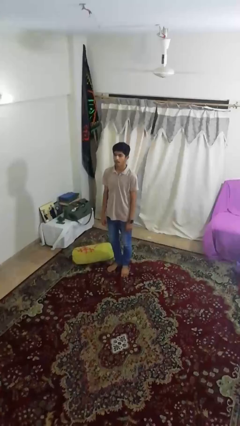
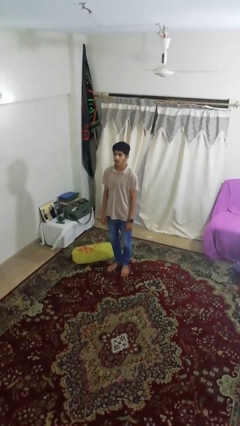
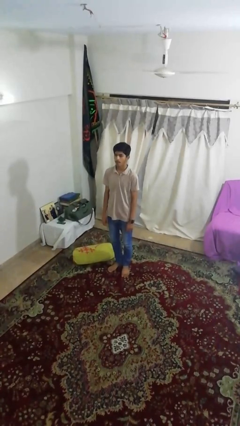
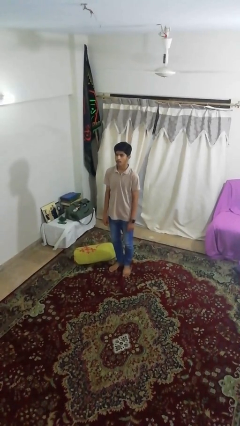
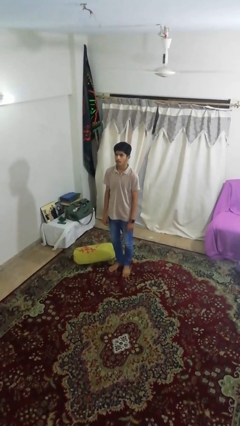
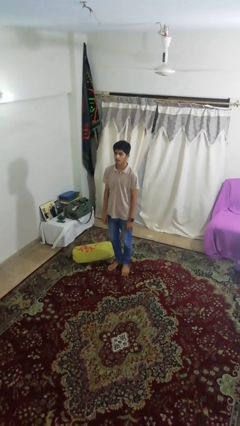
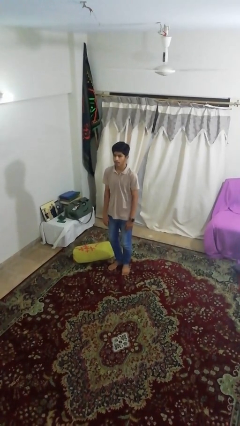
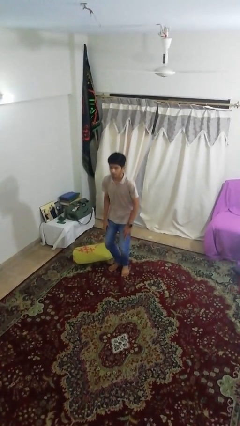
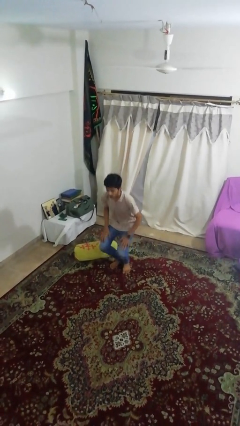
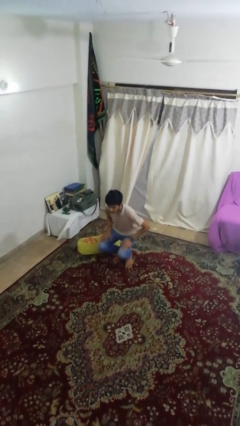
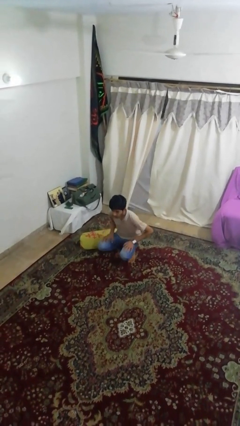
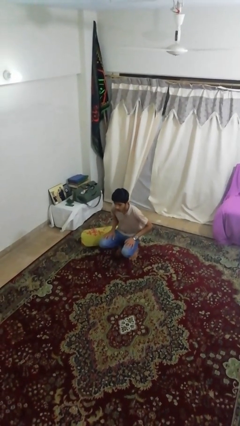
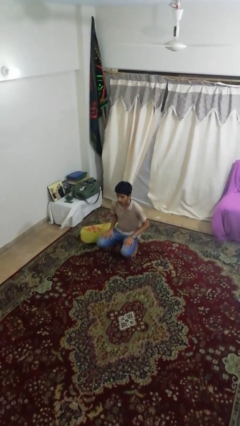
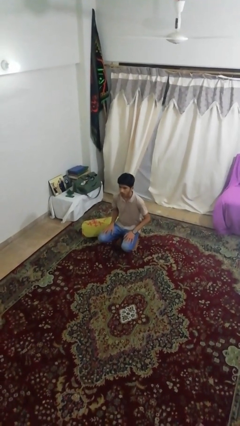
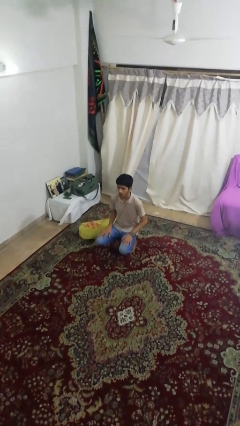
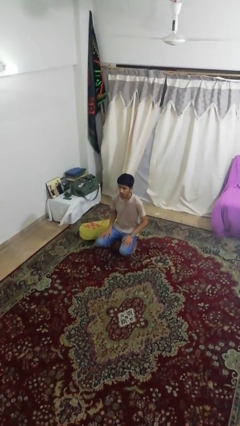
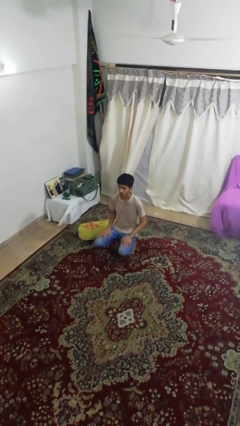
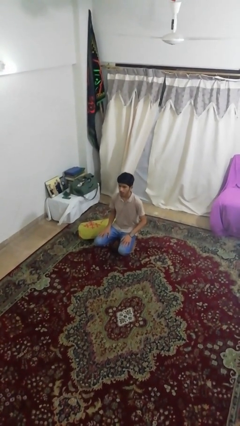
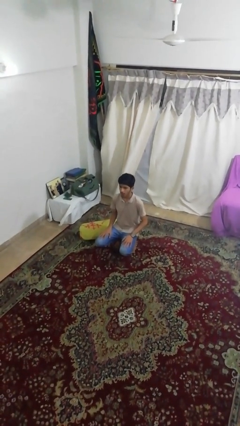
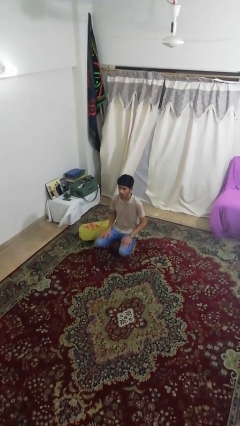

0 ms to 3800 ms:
person squats

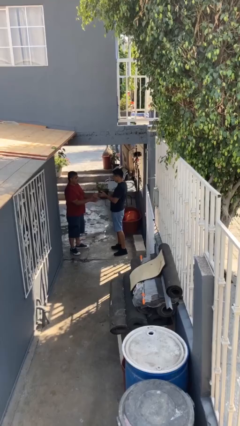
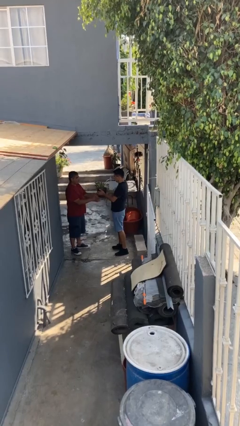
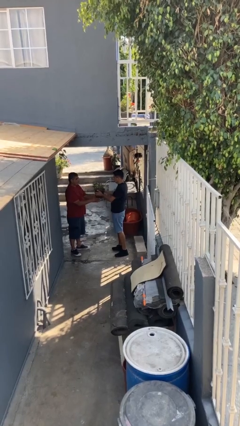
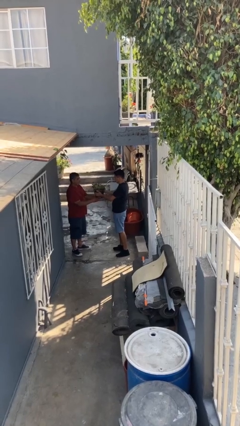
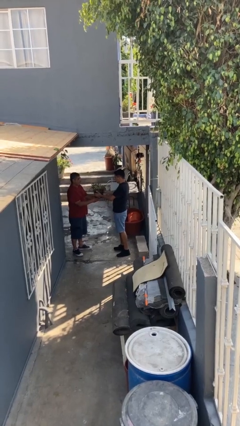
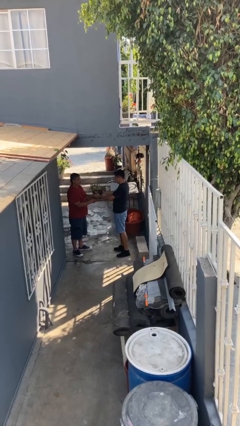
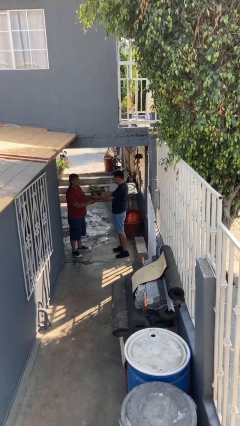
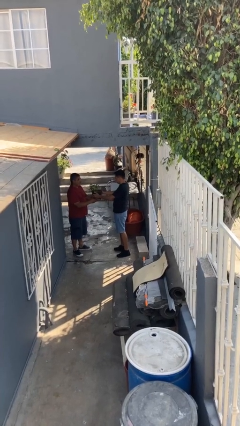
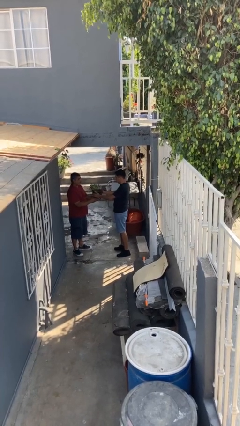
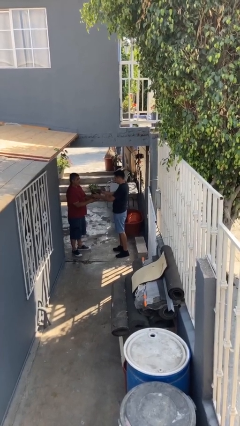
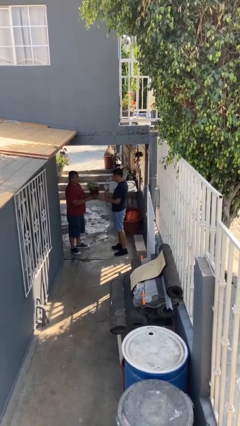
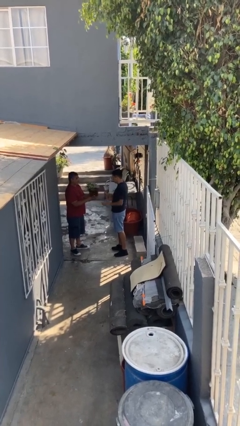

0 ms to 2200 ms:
person transfers object to person

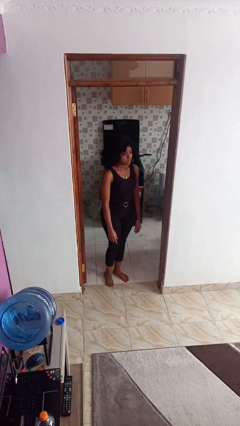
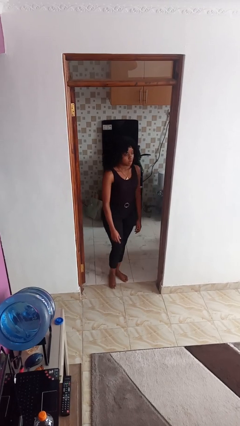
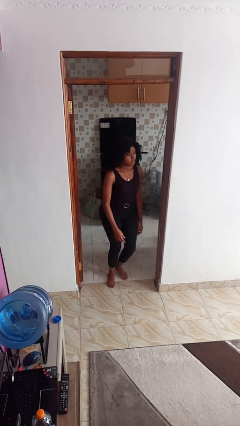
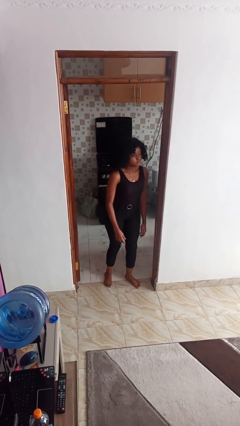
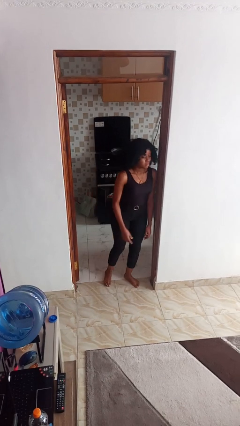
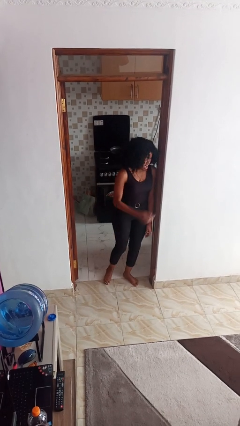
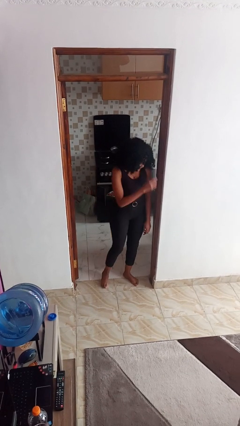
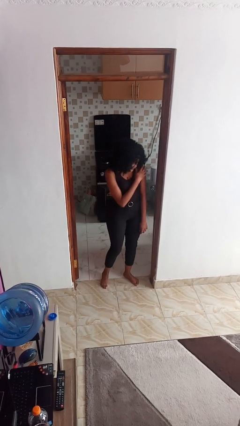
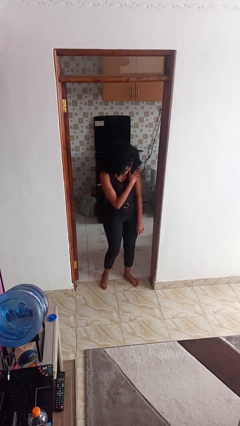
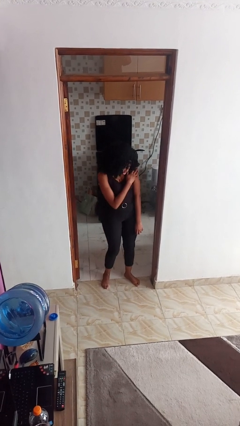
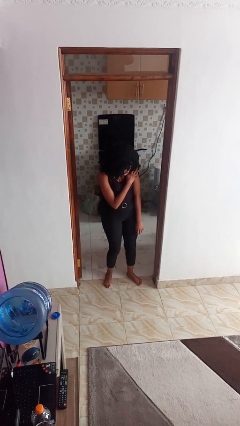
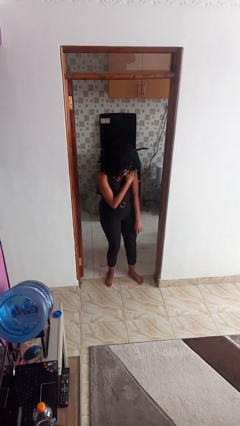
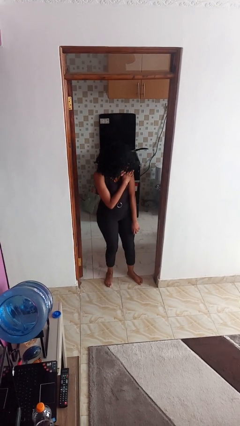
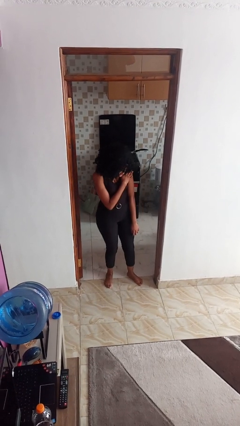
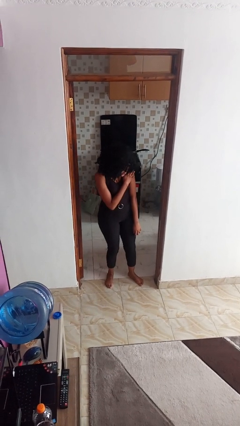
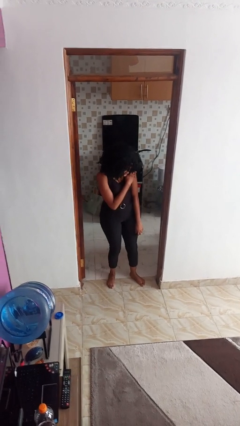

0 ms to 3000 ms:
person bumps into wall

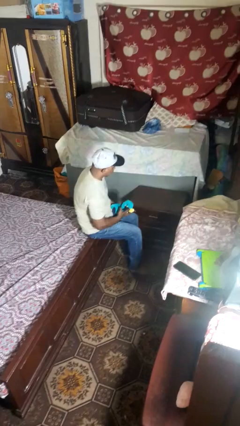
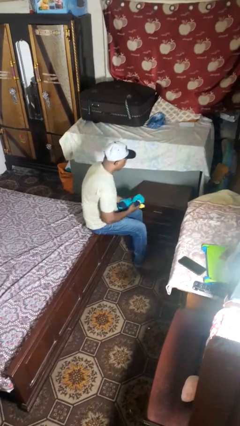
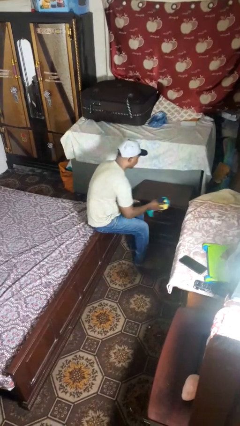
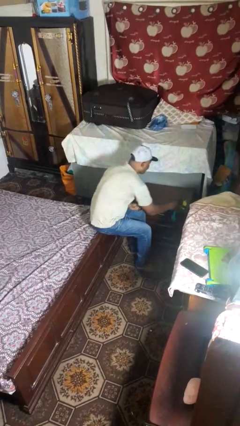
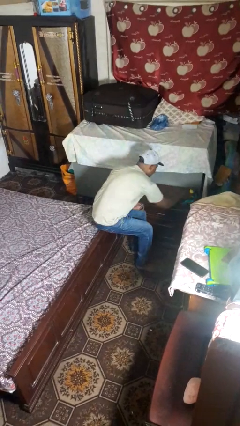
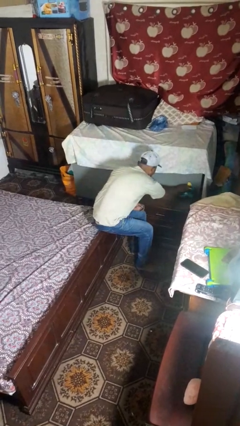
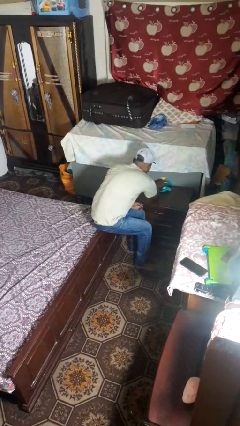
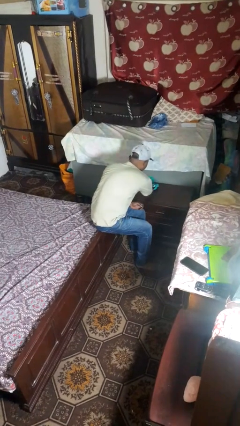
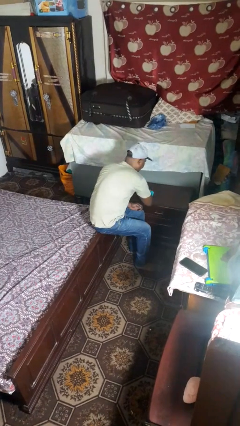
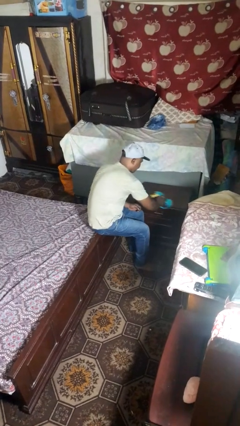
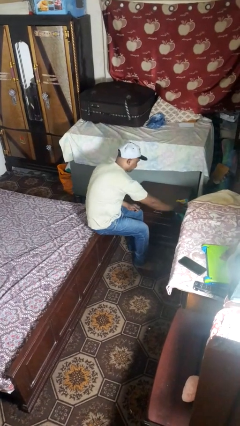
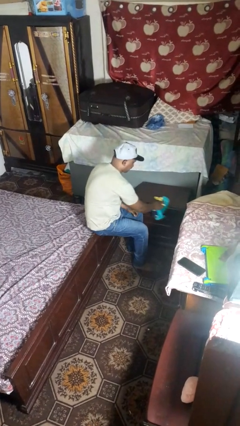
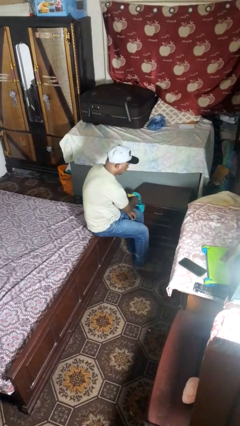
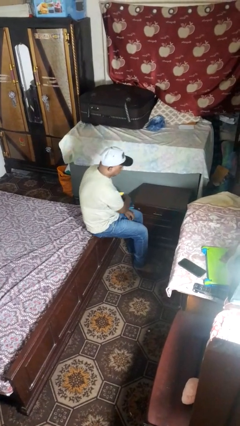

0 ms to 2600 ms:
person cleans table with rag

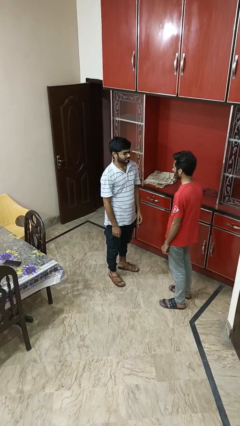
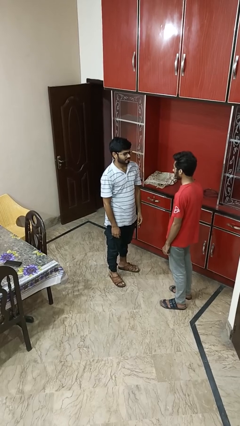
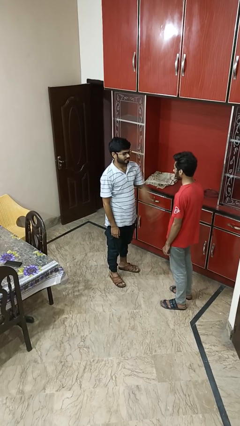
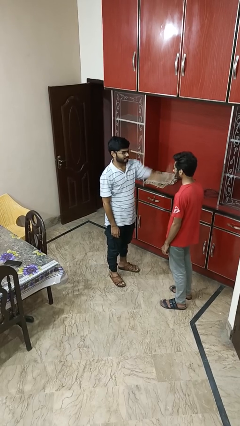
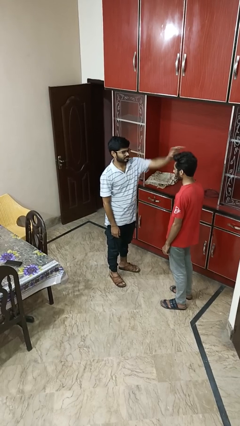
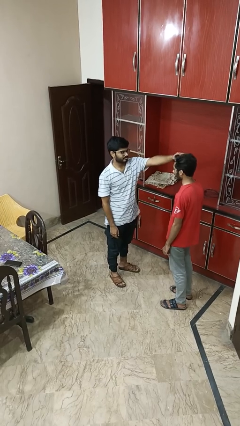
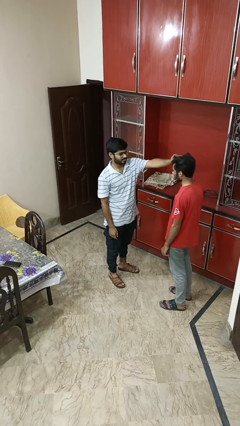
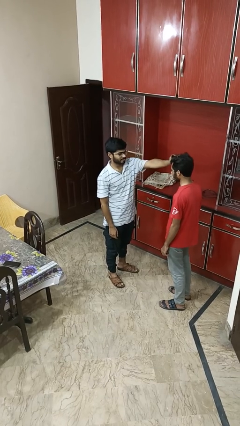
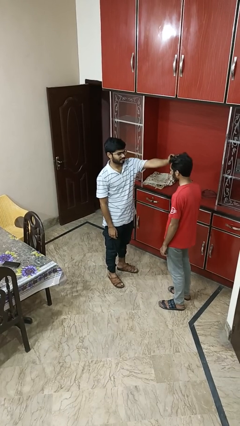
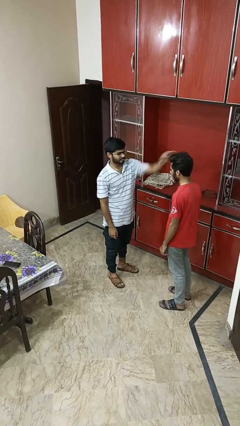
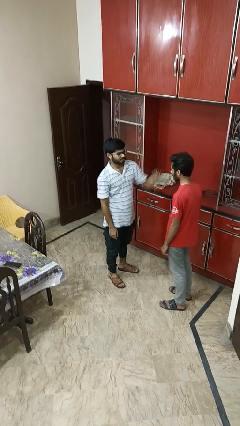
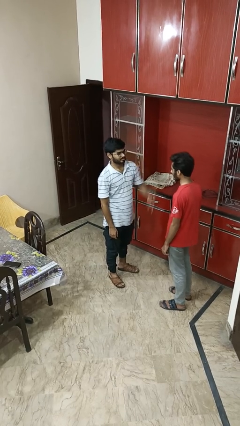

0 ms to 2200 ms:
person grabs person by hair

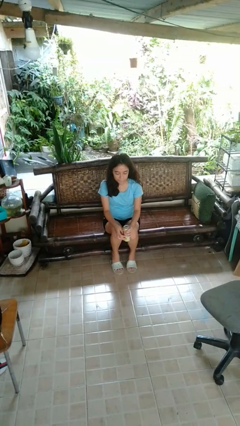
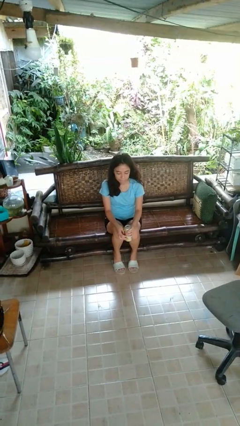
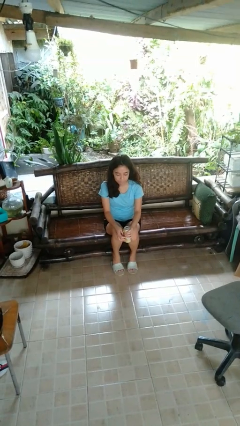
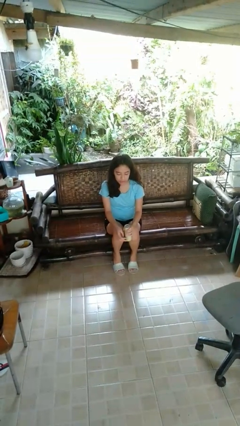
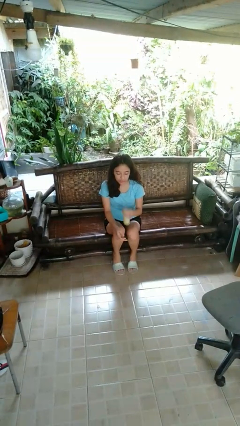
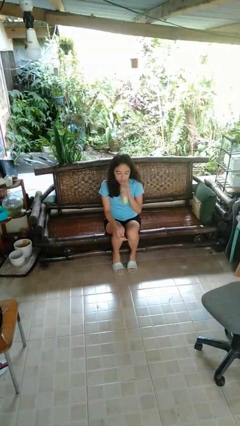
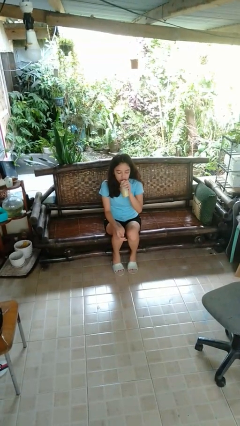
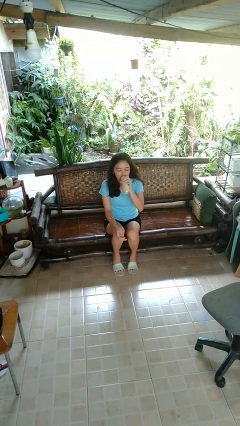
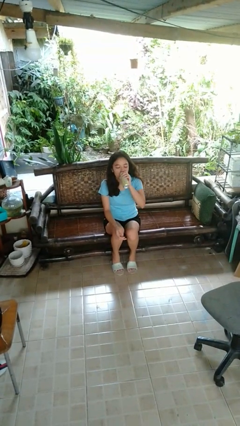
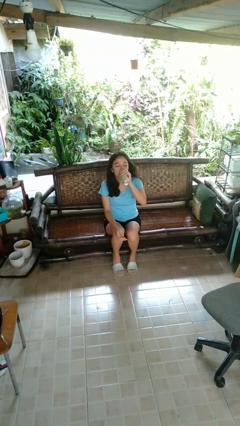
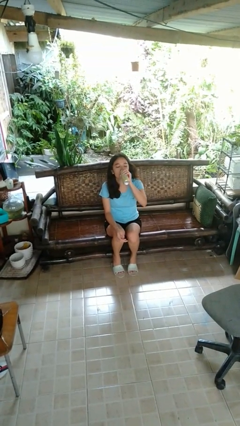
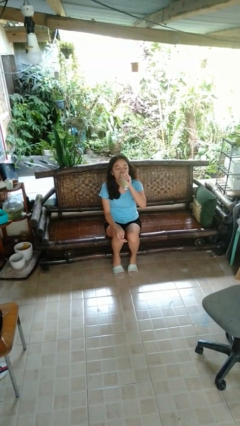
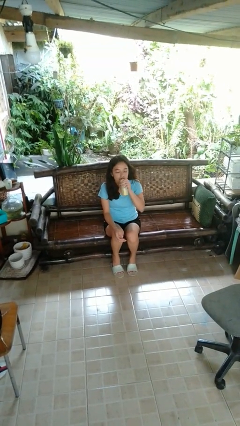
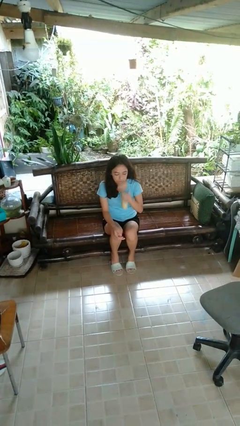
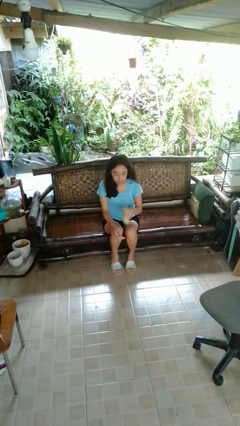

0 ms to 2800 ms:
person drinks from beverage can

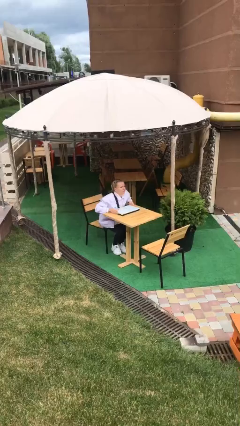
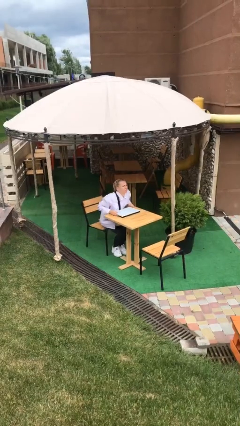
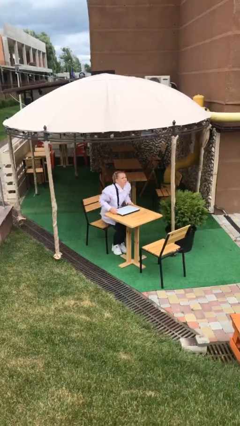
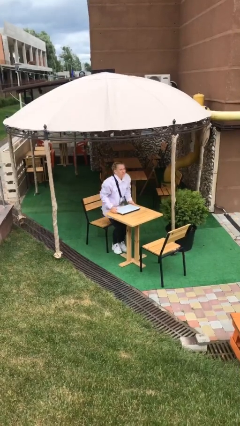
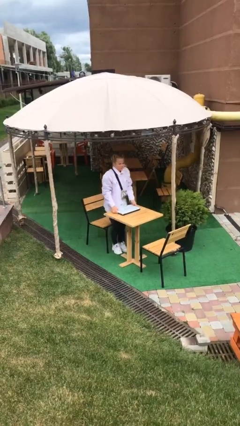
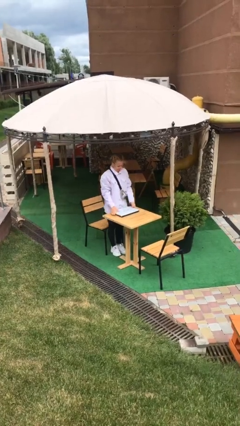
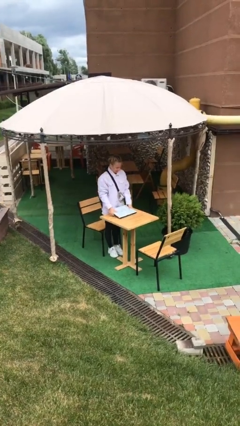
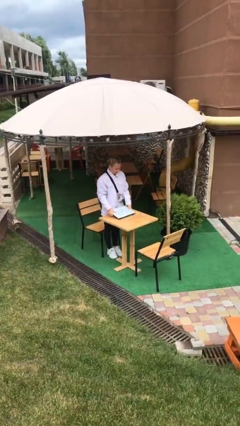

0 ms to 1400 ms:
person stands up
